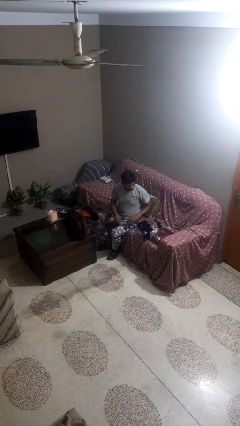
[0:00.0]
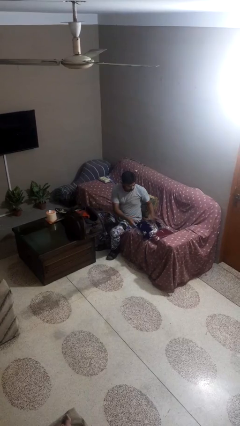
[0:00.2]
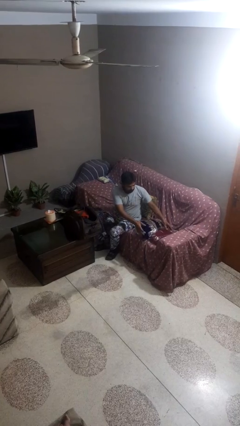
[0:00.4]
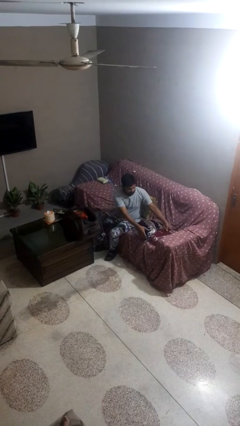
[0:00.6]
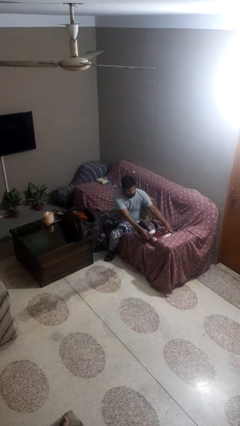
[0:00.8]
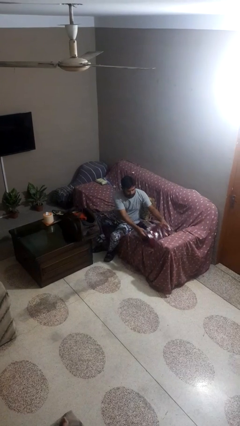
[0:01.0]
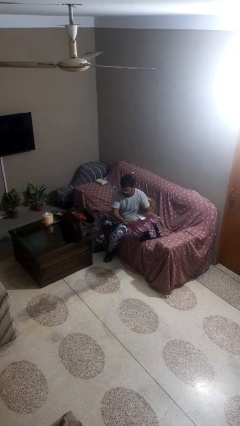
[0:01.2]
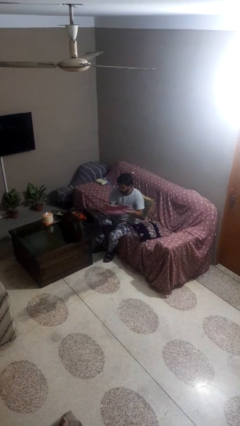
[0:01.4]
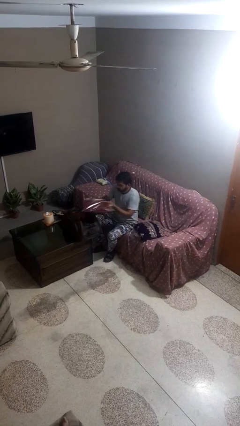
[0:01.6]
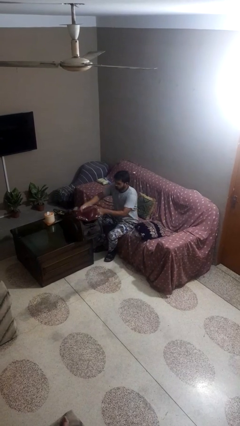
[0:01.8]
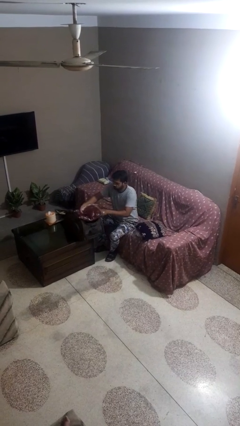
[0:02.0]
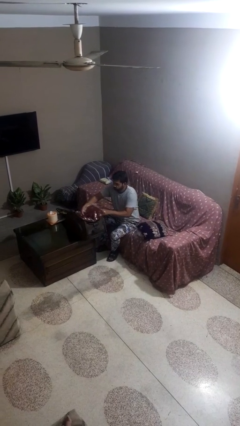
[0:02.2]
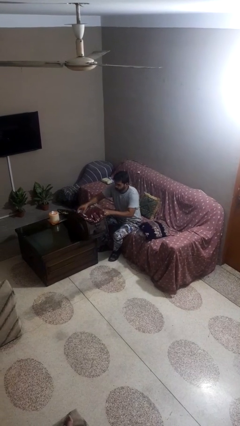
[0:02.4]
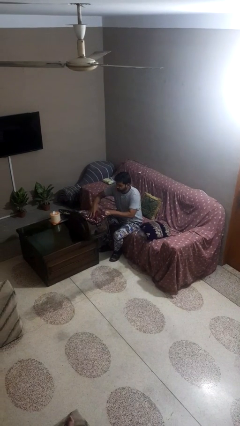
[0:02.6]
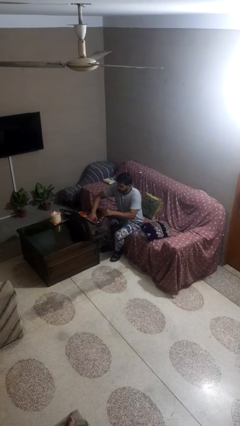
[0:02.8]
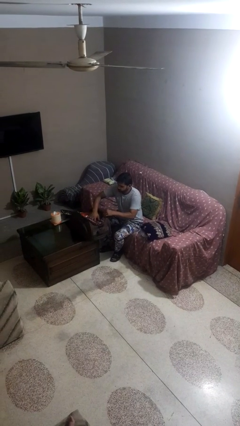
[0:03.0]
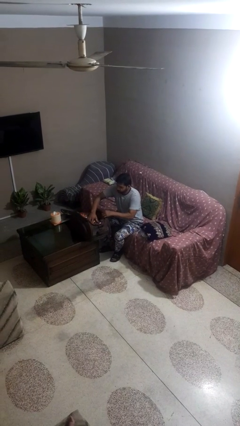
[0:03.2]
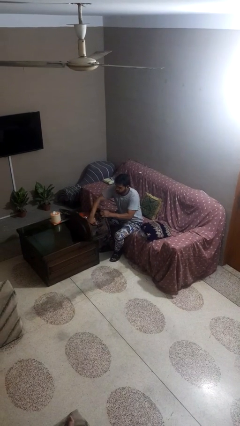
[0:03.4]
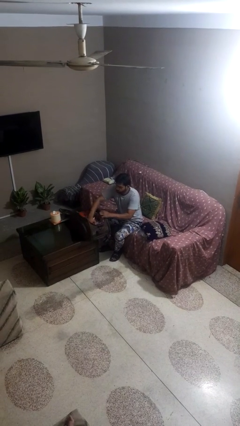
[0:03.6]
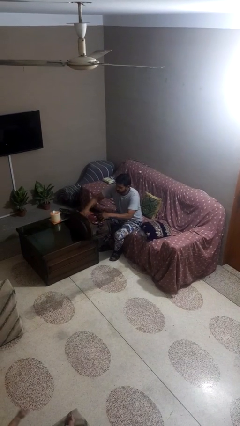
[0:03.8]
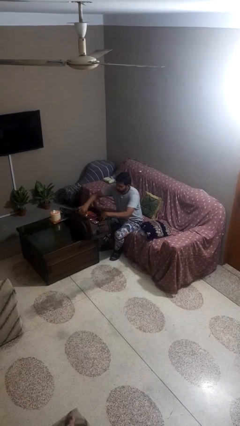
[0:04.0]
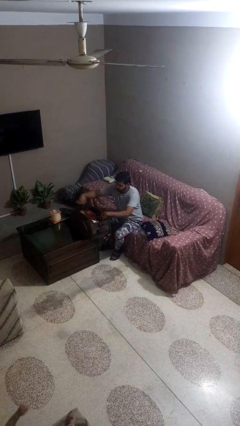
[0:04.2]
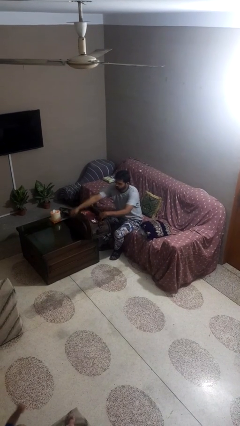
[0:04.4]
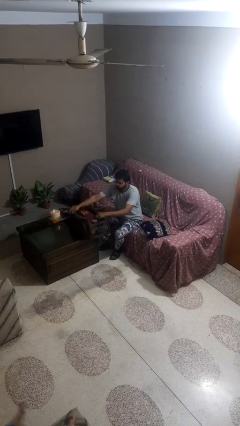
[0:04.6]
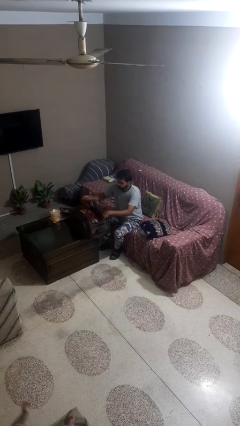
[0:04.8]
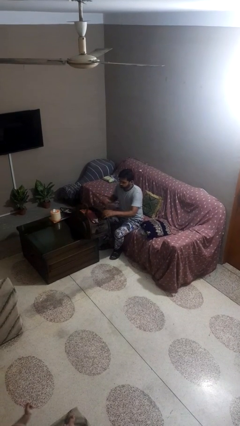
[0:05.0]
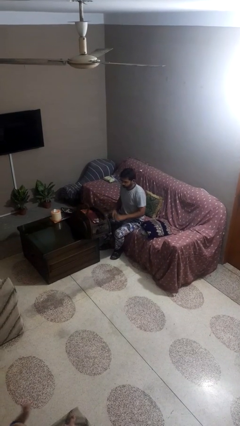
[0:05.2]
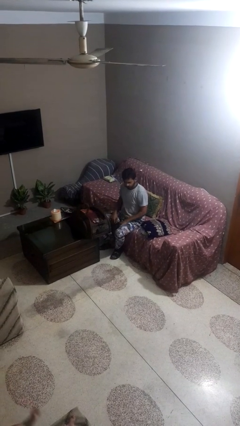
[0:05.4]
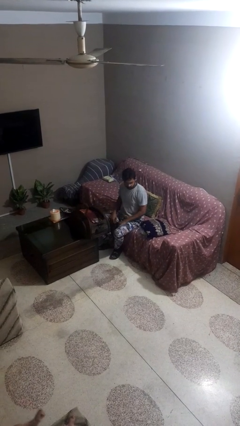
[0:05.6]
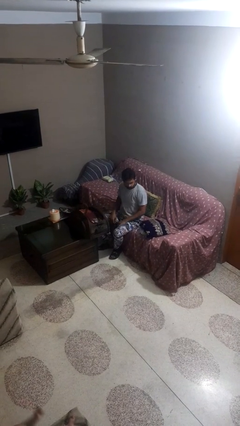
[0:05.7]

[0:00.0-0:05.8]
person loads clothes into suitcase

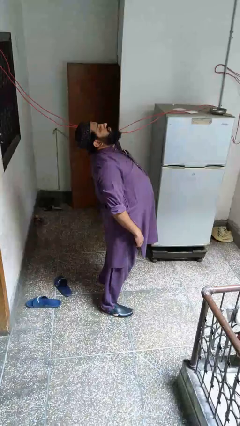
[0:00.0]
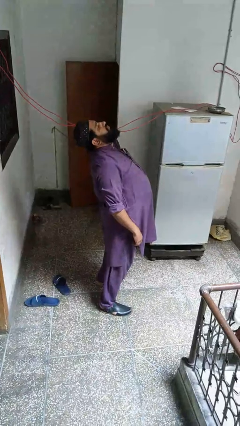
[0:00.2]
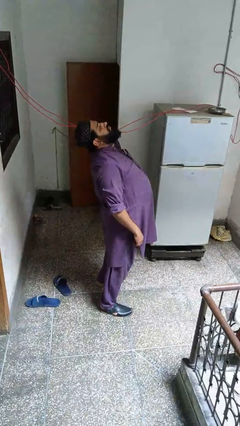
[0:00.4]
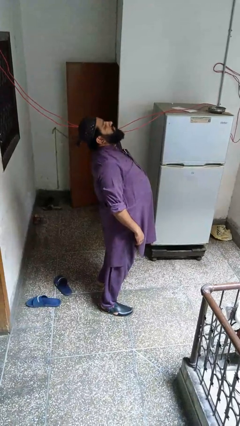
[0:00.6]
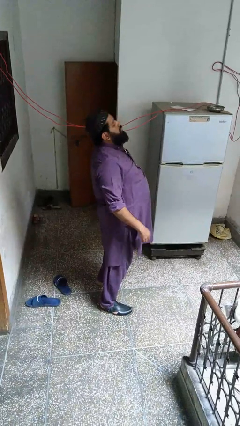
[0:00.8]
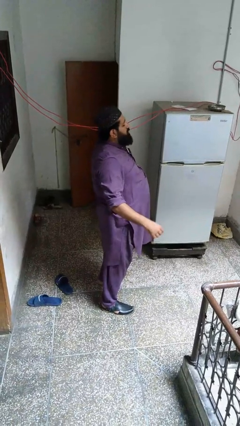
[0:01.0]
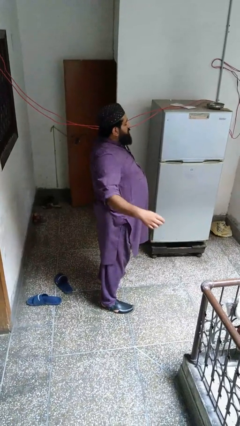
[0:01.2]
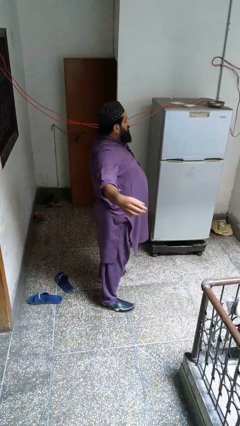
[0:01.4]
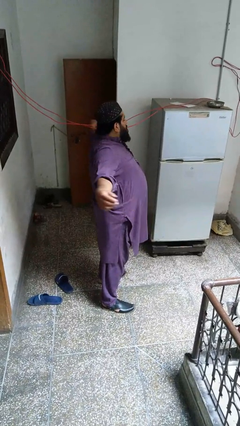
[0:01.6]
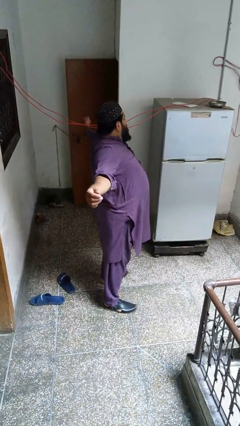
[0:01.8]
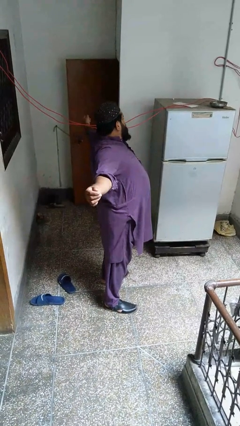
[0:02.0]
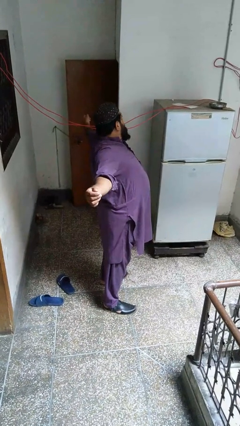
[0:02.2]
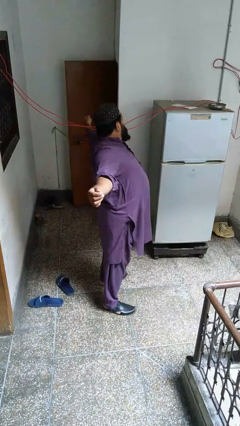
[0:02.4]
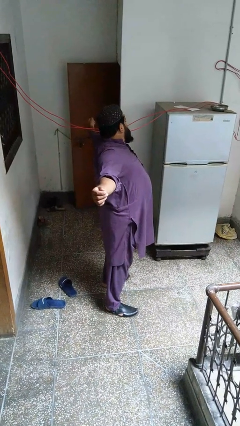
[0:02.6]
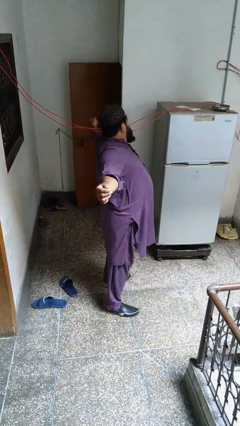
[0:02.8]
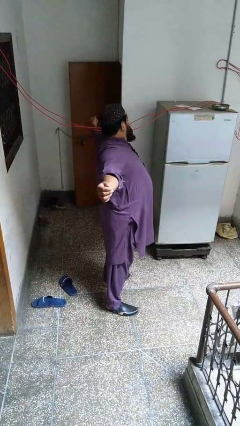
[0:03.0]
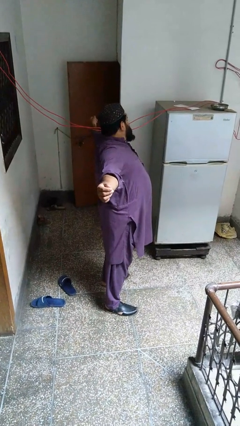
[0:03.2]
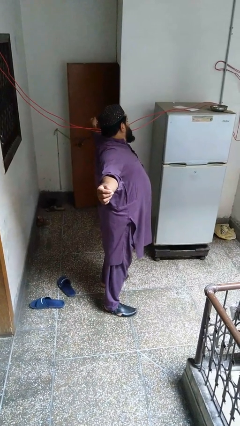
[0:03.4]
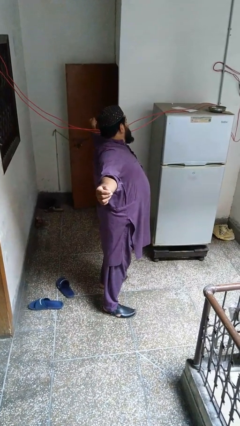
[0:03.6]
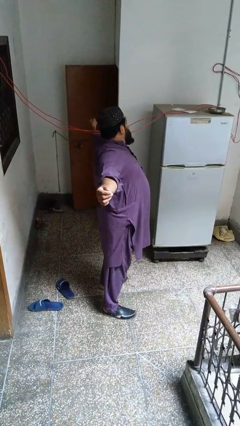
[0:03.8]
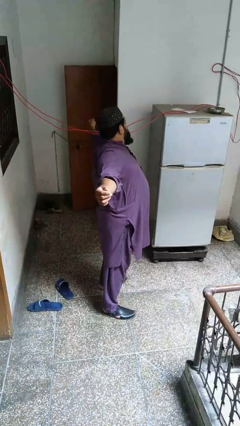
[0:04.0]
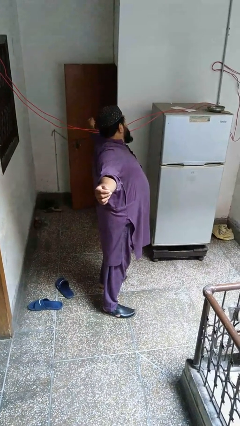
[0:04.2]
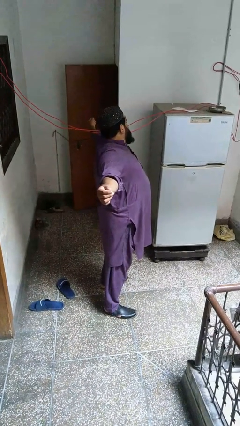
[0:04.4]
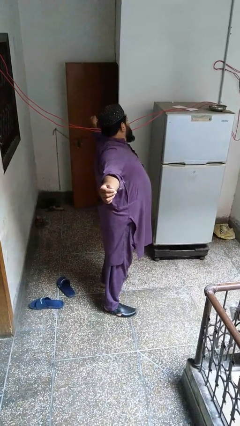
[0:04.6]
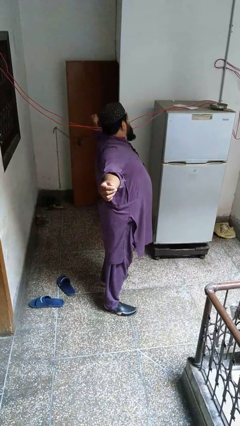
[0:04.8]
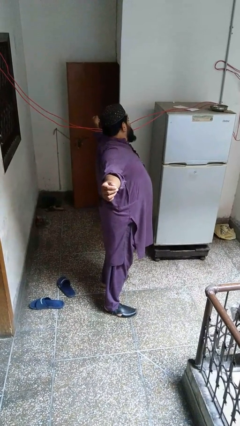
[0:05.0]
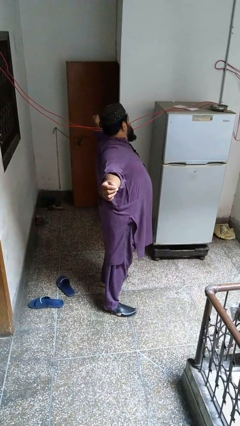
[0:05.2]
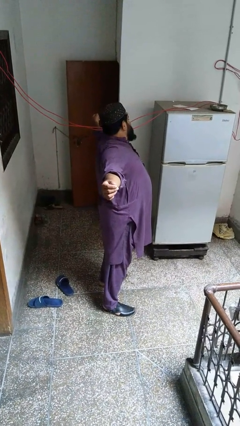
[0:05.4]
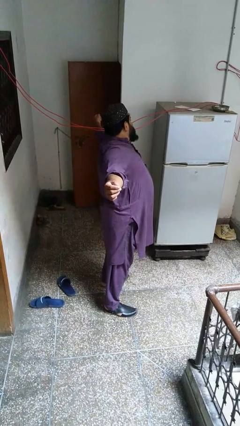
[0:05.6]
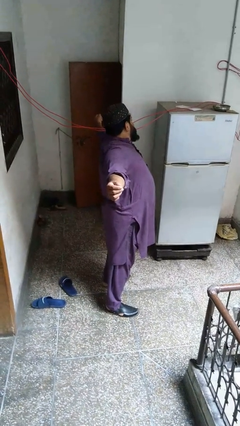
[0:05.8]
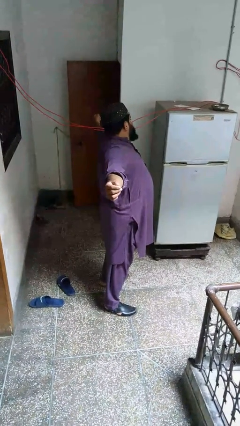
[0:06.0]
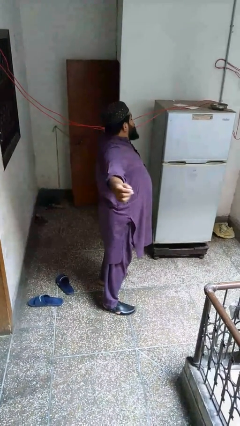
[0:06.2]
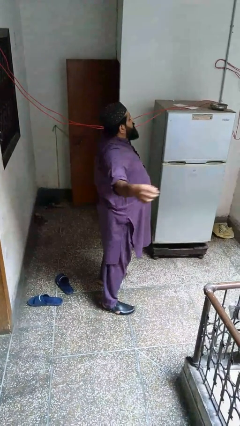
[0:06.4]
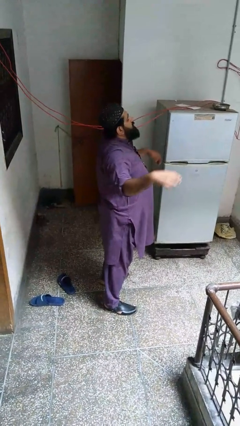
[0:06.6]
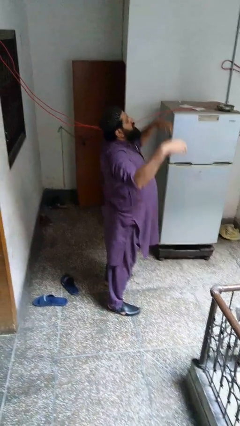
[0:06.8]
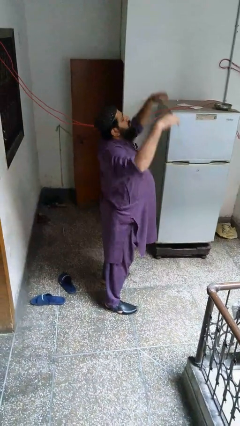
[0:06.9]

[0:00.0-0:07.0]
person stretches arms to side

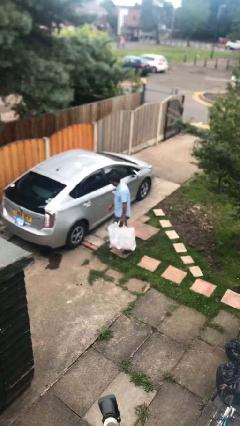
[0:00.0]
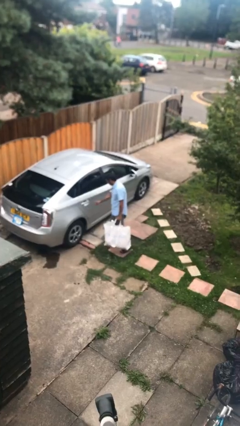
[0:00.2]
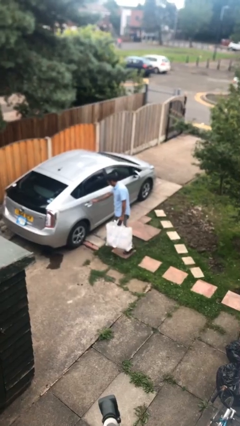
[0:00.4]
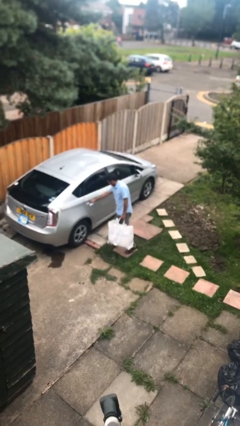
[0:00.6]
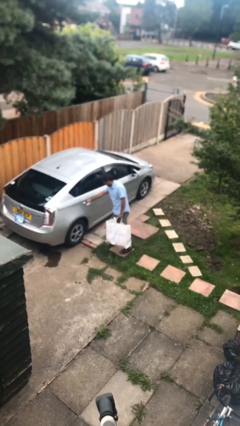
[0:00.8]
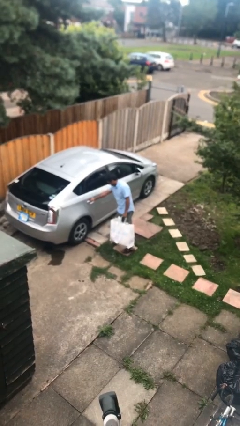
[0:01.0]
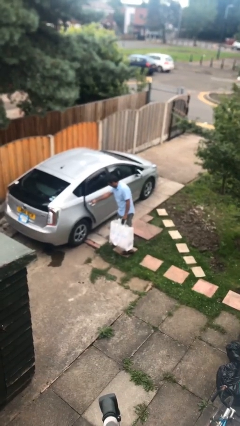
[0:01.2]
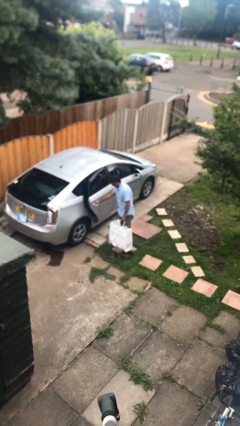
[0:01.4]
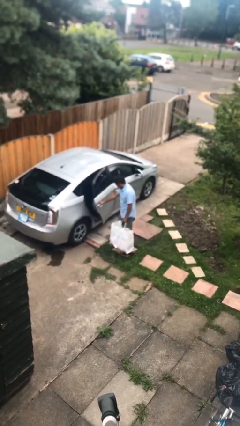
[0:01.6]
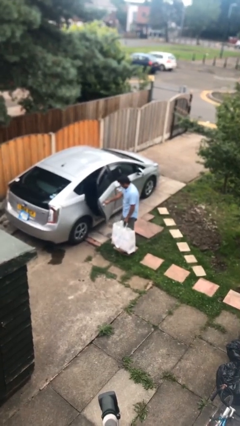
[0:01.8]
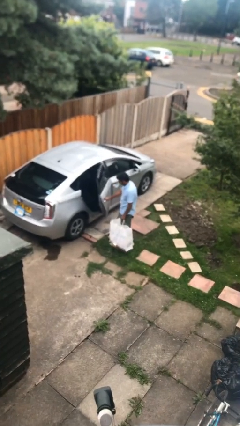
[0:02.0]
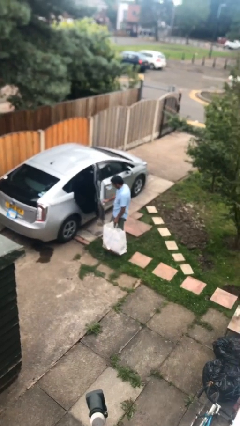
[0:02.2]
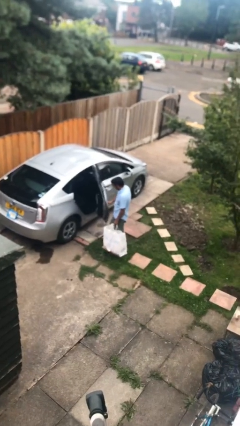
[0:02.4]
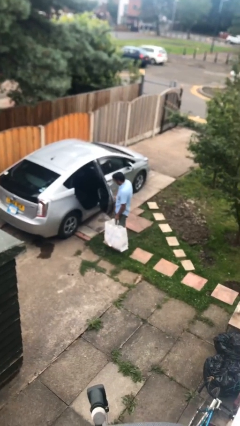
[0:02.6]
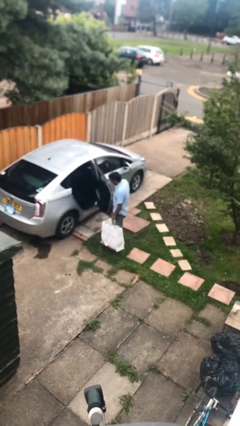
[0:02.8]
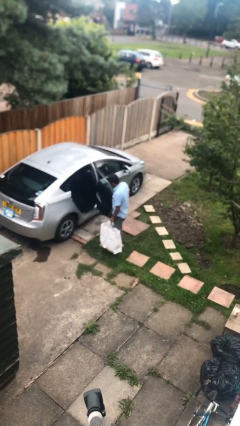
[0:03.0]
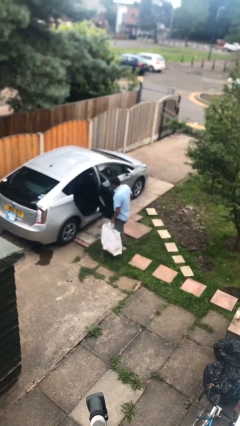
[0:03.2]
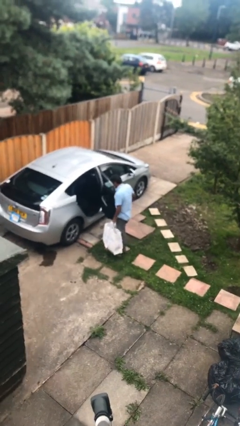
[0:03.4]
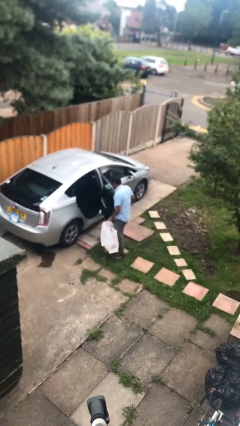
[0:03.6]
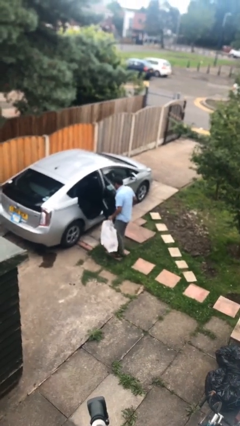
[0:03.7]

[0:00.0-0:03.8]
person opens car door

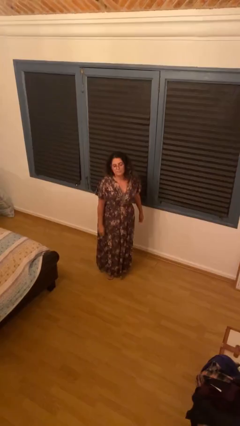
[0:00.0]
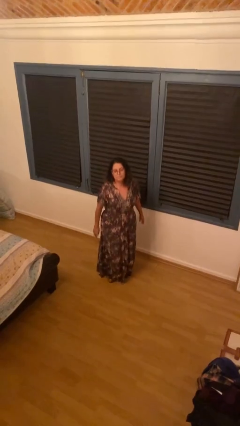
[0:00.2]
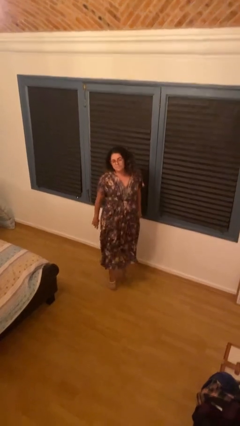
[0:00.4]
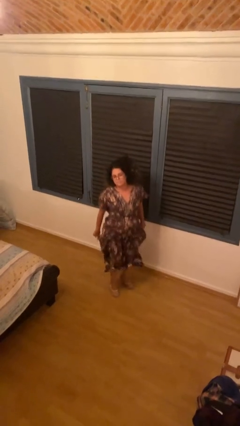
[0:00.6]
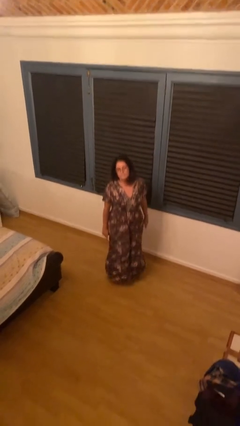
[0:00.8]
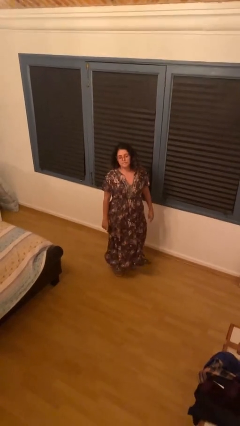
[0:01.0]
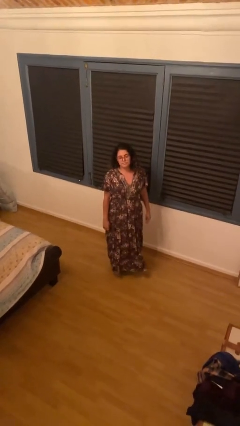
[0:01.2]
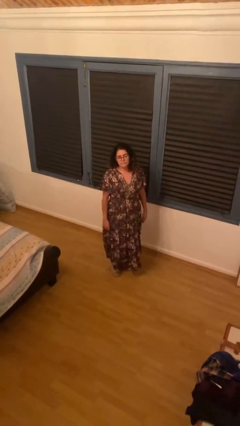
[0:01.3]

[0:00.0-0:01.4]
person jumps
